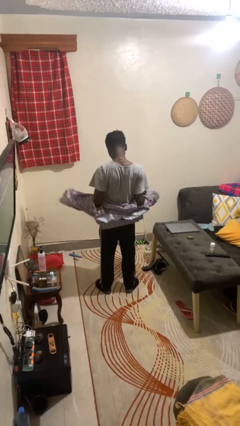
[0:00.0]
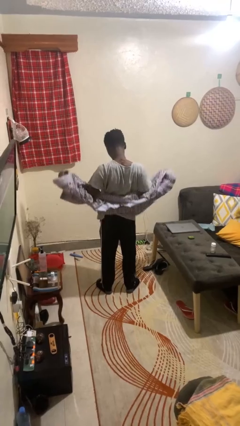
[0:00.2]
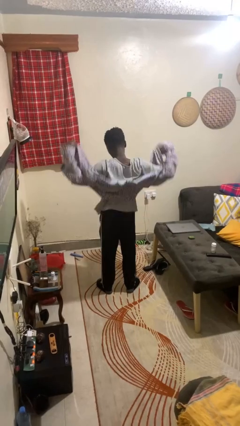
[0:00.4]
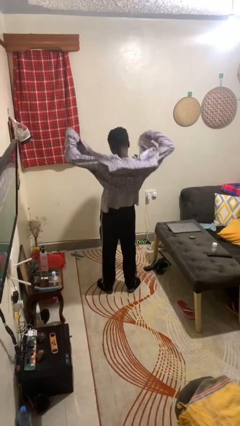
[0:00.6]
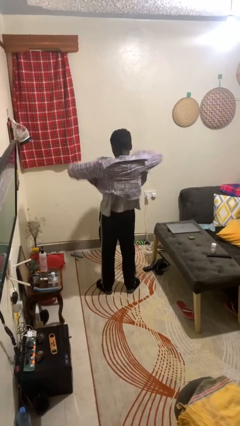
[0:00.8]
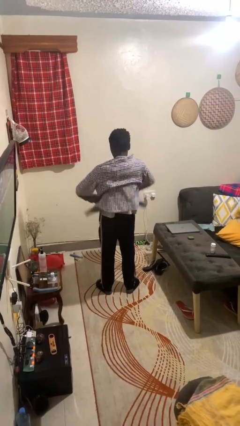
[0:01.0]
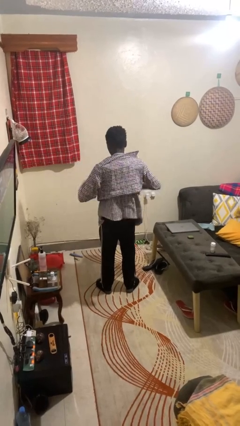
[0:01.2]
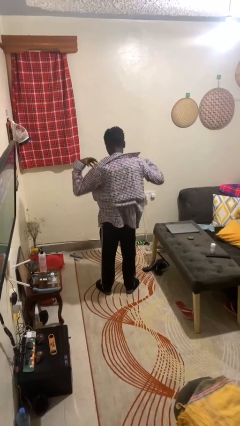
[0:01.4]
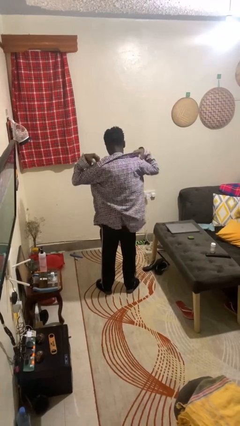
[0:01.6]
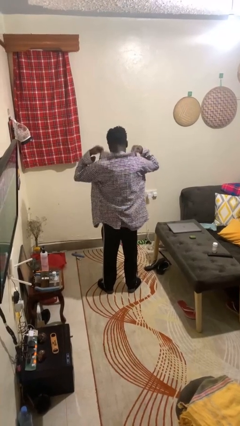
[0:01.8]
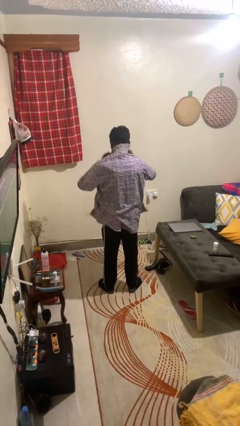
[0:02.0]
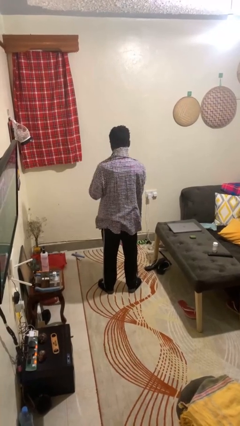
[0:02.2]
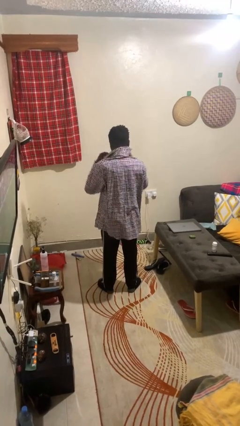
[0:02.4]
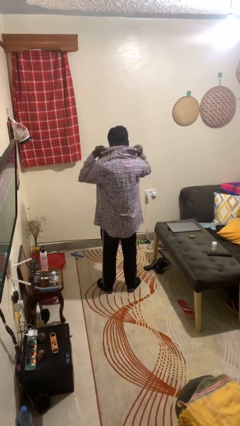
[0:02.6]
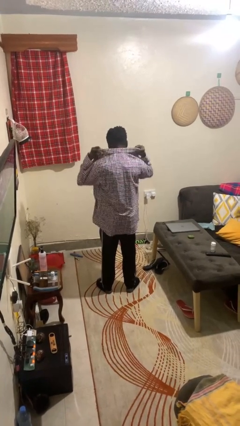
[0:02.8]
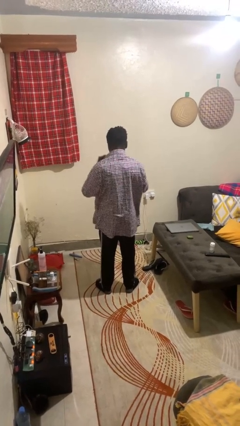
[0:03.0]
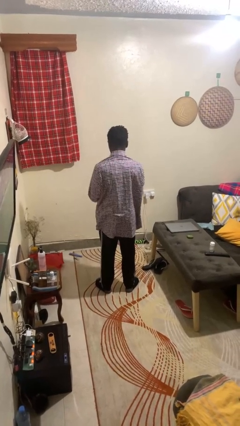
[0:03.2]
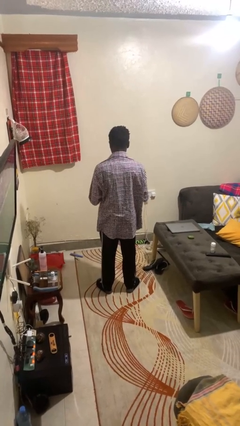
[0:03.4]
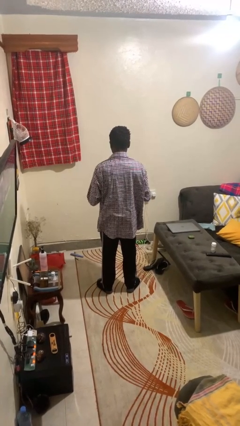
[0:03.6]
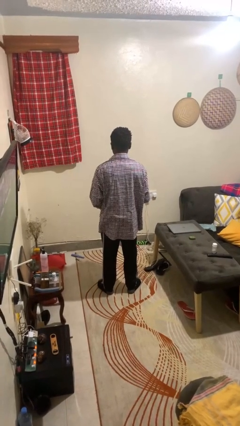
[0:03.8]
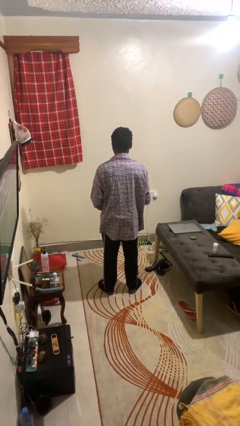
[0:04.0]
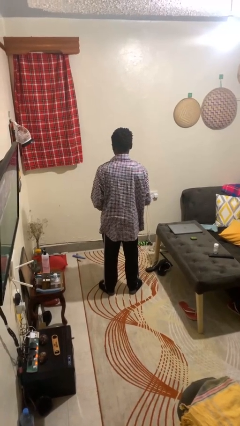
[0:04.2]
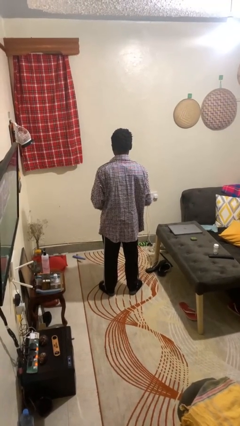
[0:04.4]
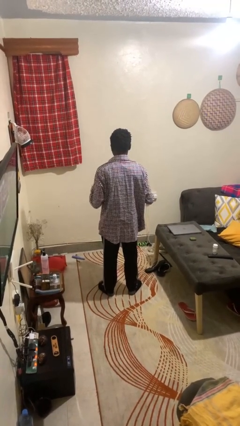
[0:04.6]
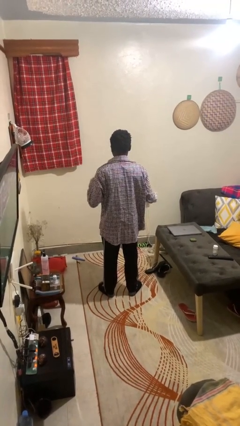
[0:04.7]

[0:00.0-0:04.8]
person puts on shirt

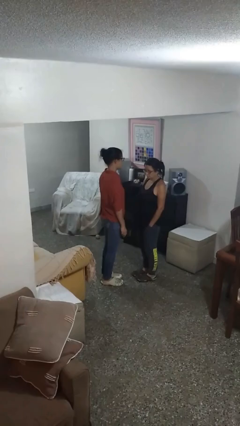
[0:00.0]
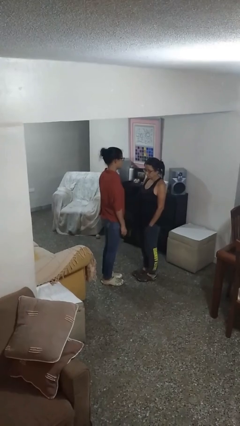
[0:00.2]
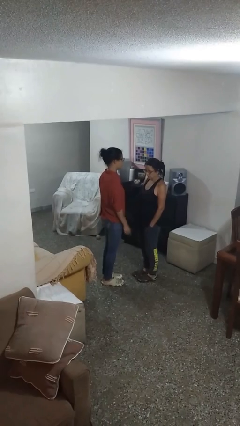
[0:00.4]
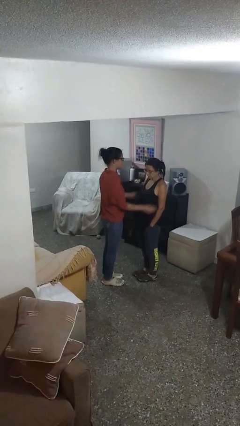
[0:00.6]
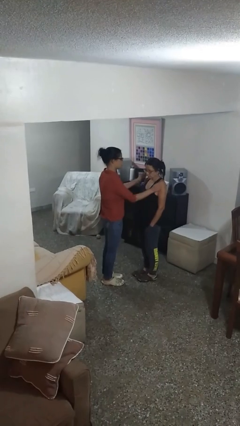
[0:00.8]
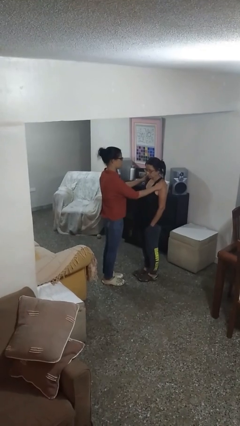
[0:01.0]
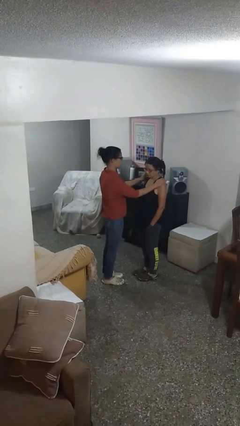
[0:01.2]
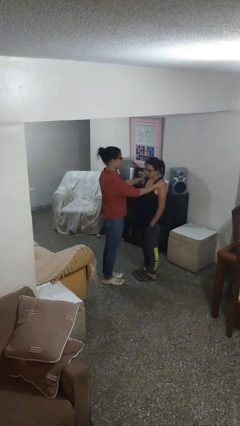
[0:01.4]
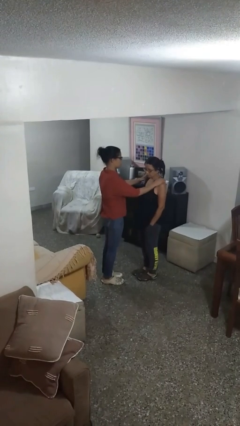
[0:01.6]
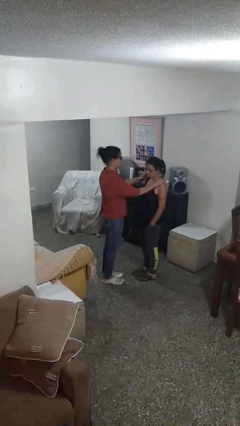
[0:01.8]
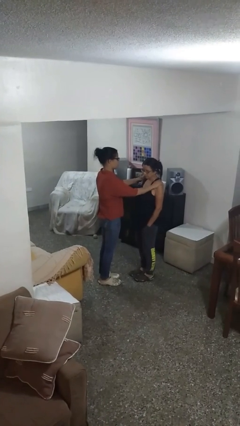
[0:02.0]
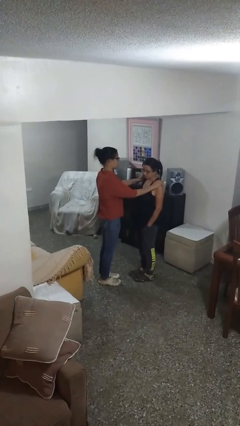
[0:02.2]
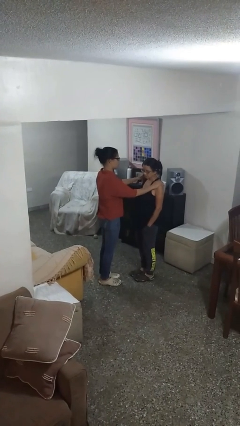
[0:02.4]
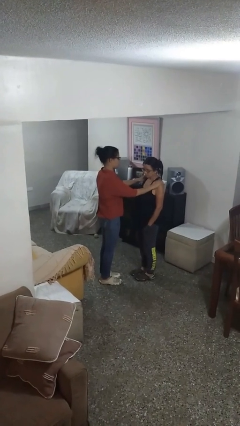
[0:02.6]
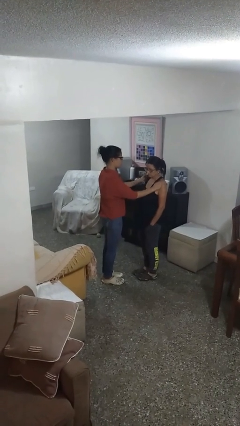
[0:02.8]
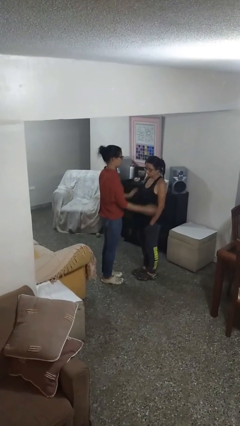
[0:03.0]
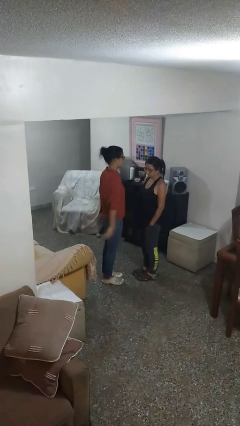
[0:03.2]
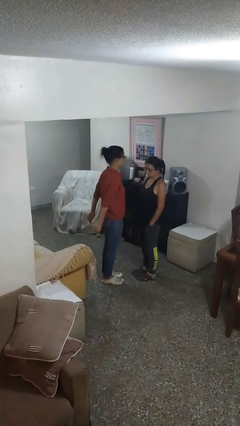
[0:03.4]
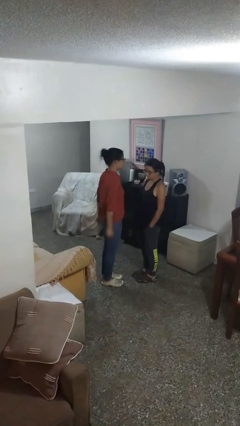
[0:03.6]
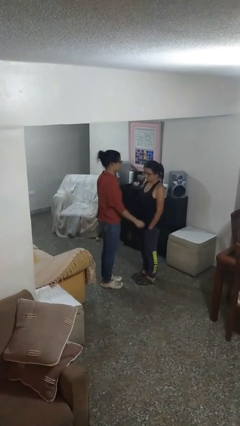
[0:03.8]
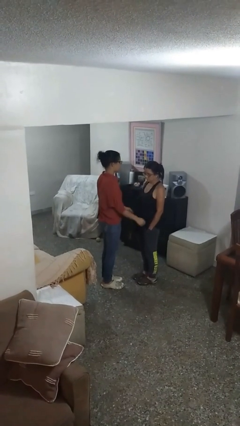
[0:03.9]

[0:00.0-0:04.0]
person pounds shoulders of person

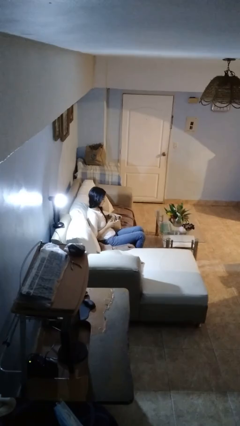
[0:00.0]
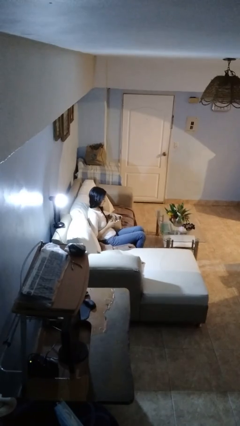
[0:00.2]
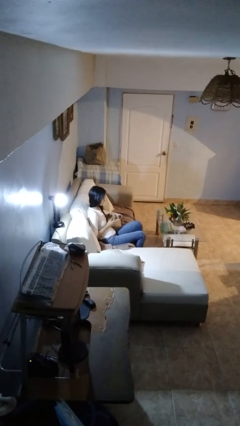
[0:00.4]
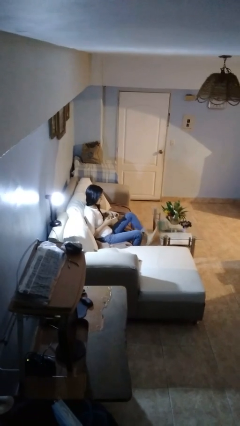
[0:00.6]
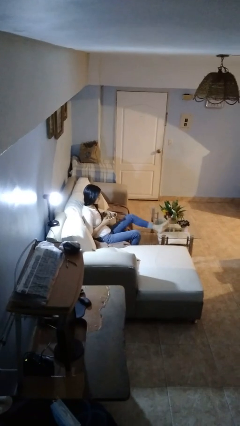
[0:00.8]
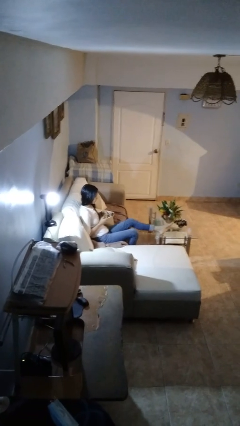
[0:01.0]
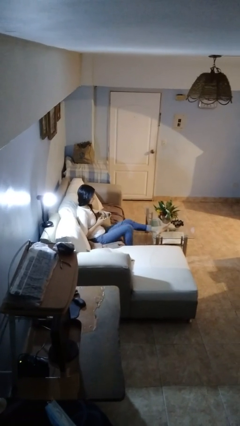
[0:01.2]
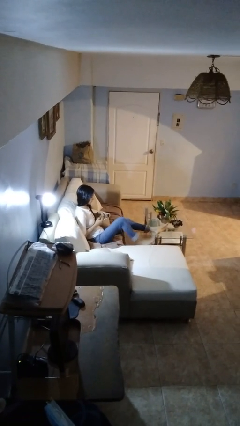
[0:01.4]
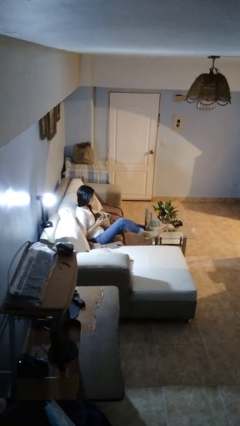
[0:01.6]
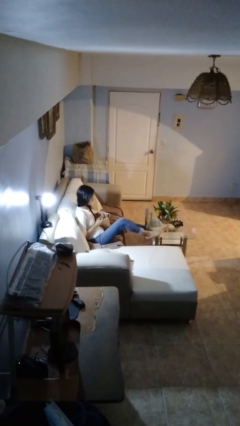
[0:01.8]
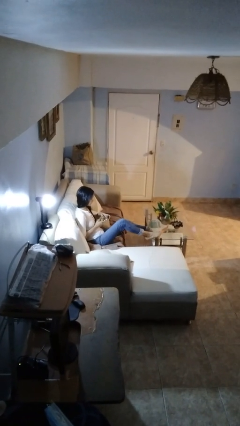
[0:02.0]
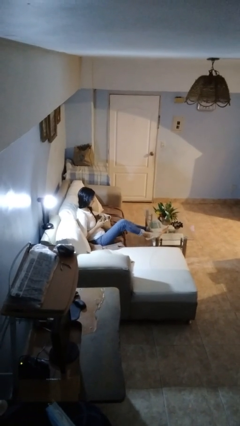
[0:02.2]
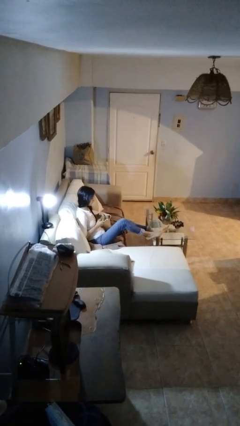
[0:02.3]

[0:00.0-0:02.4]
person puts feet up

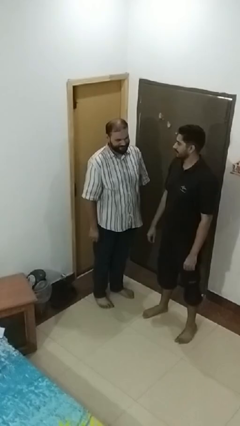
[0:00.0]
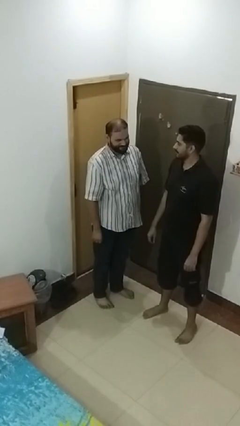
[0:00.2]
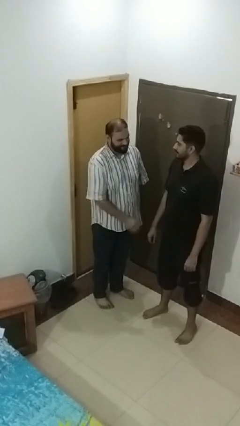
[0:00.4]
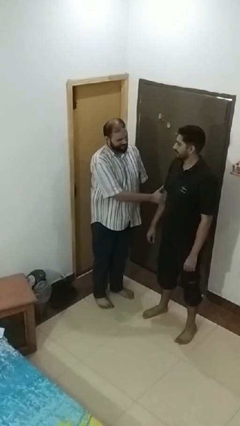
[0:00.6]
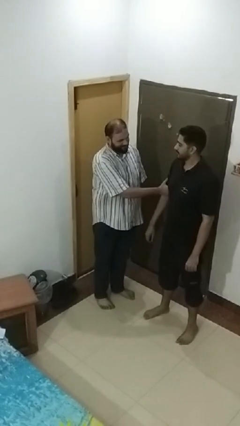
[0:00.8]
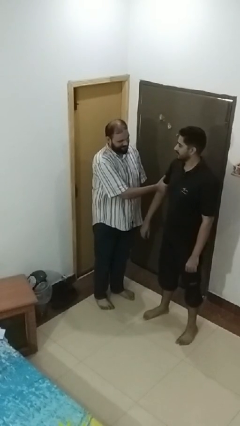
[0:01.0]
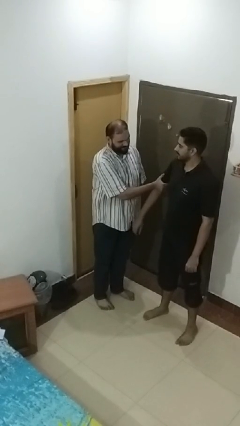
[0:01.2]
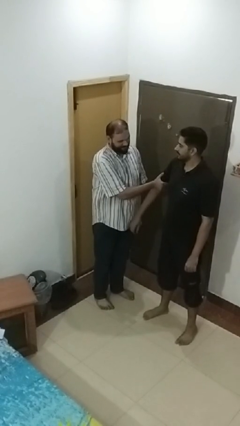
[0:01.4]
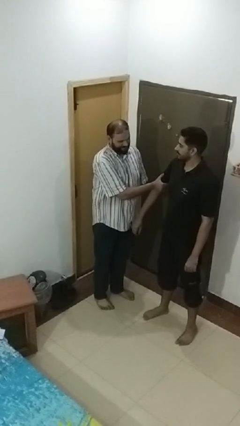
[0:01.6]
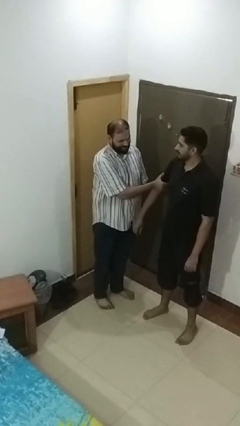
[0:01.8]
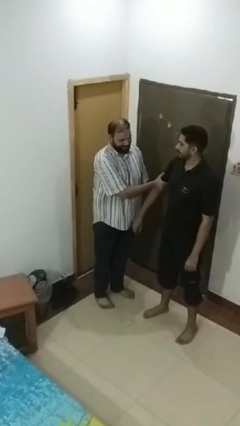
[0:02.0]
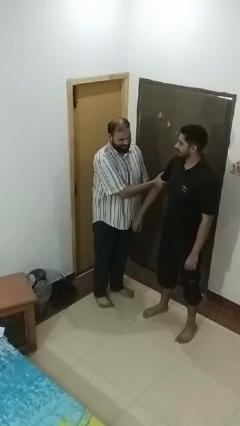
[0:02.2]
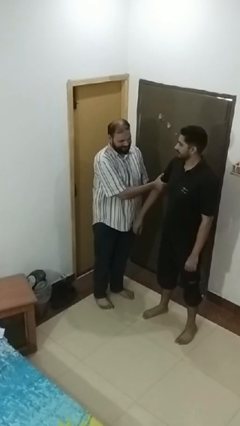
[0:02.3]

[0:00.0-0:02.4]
person grabs person by bicep

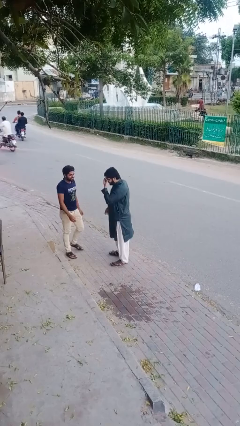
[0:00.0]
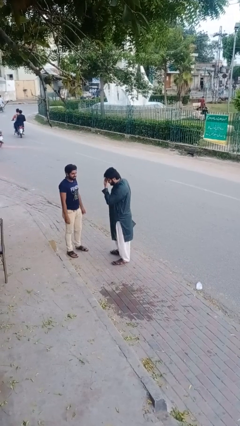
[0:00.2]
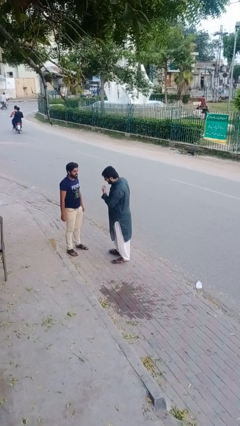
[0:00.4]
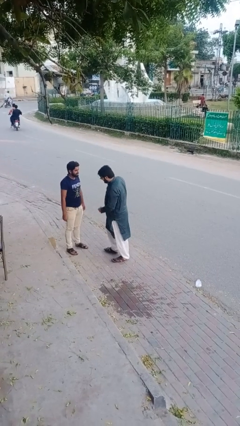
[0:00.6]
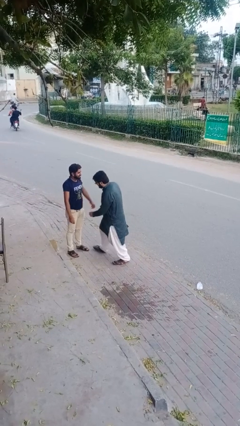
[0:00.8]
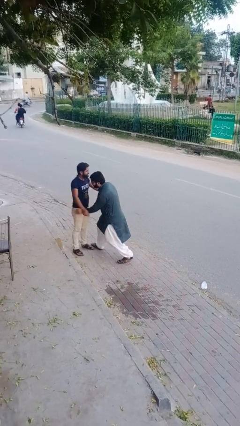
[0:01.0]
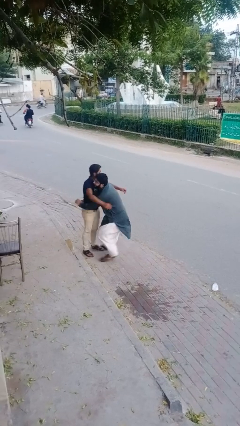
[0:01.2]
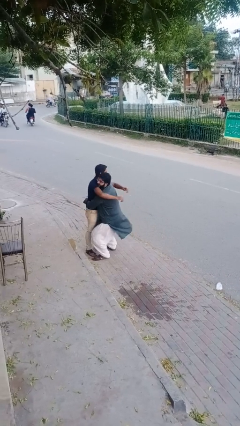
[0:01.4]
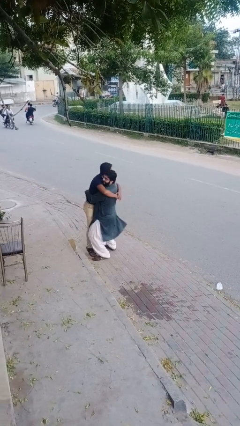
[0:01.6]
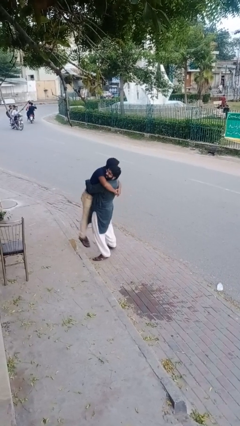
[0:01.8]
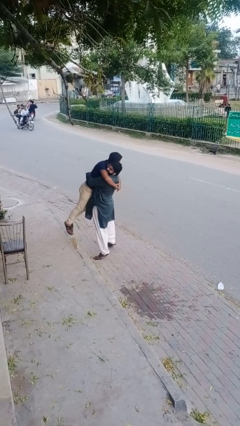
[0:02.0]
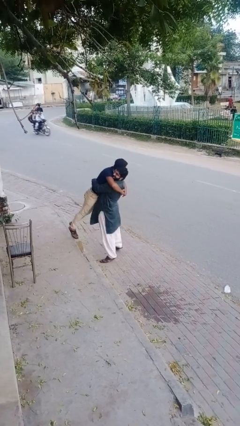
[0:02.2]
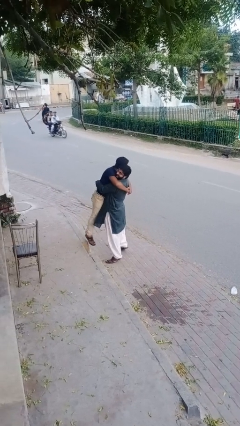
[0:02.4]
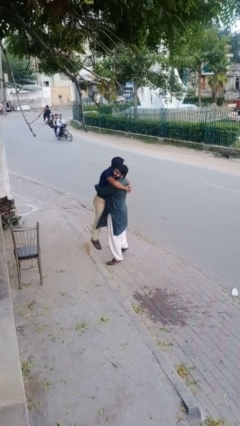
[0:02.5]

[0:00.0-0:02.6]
person picks up person

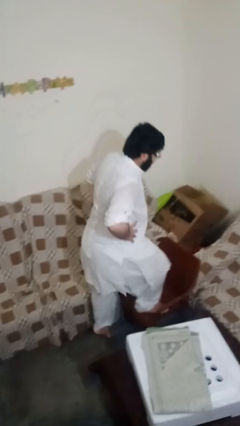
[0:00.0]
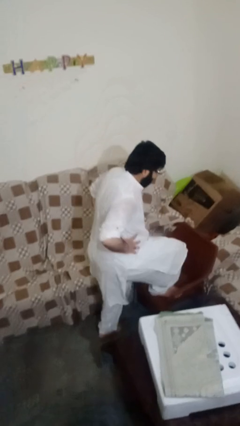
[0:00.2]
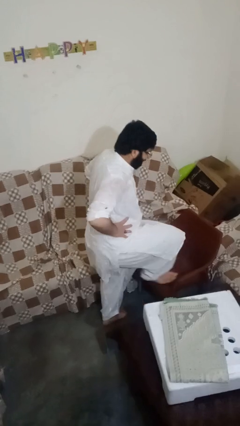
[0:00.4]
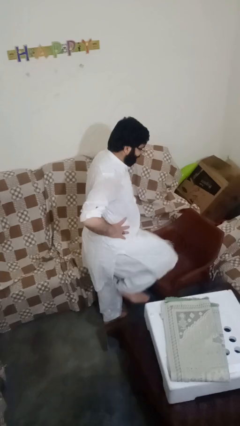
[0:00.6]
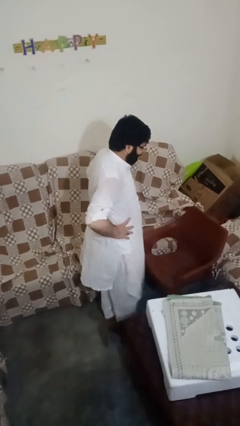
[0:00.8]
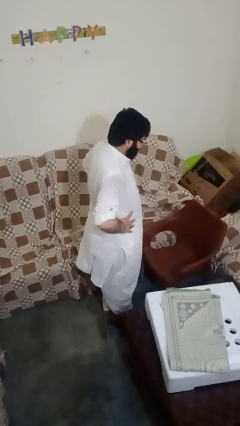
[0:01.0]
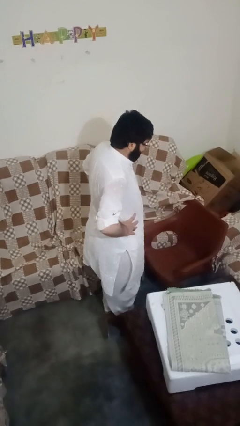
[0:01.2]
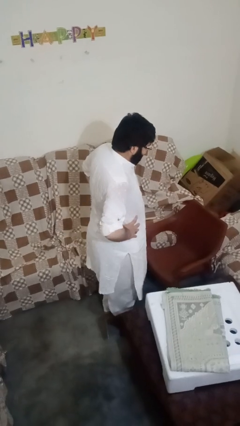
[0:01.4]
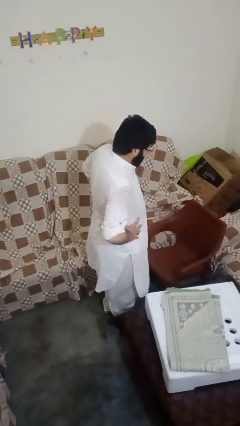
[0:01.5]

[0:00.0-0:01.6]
person climbs off chair
